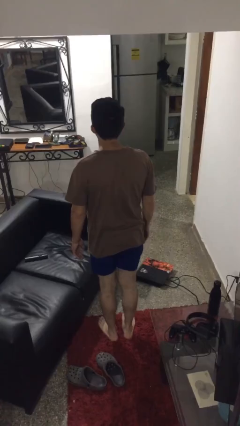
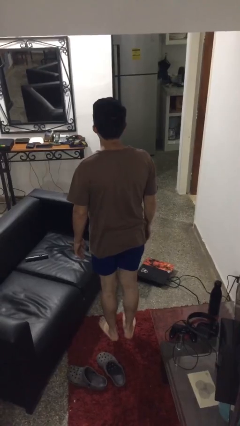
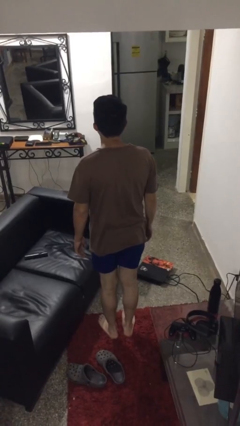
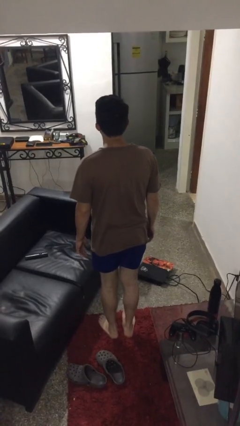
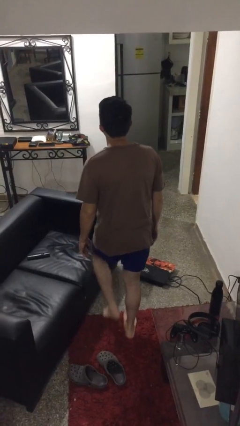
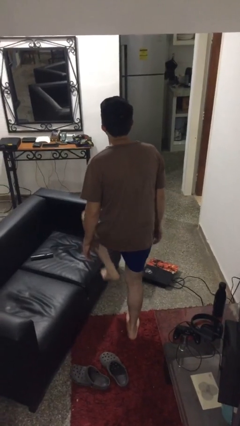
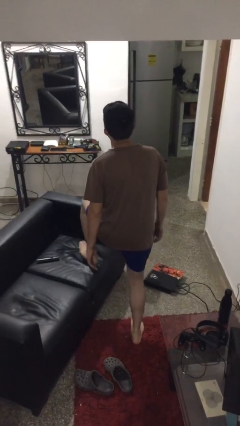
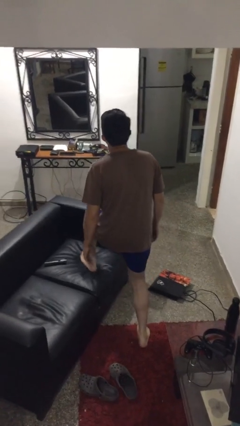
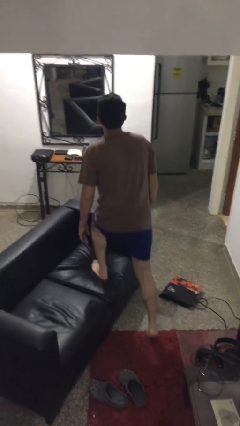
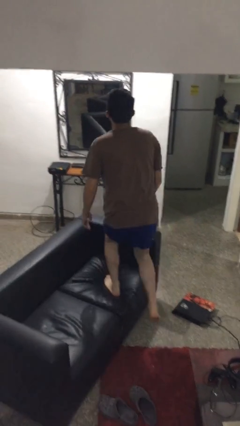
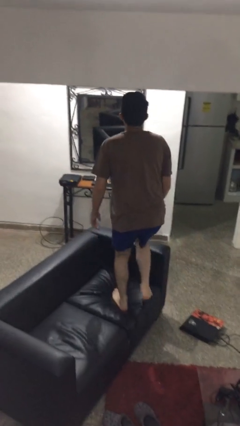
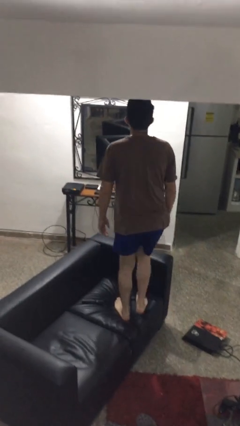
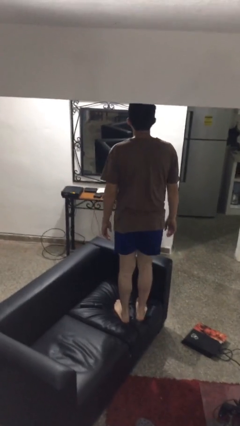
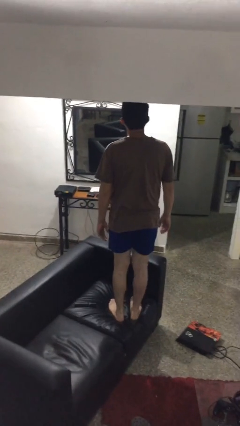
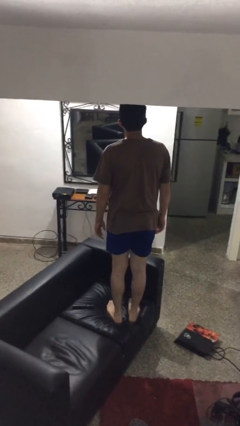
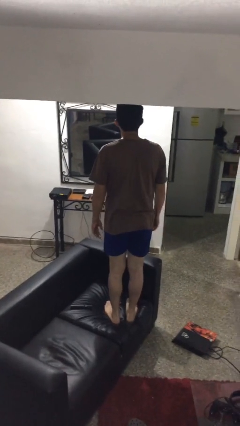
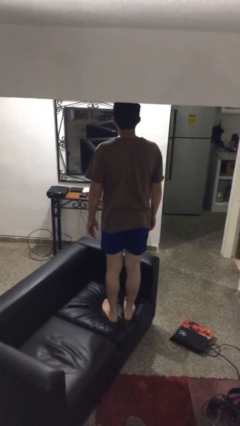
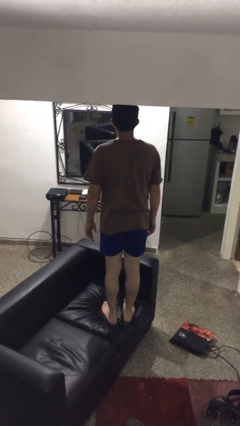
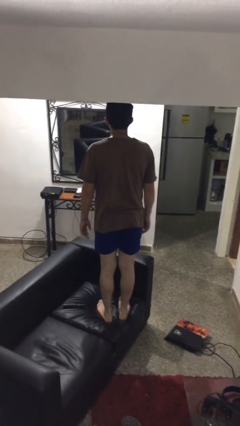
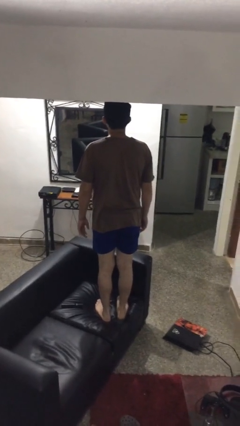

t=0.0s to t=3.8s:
person climbs on couch

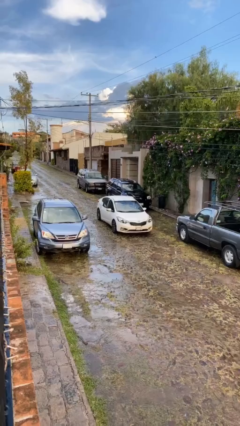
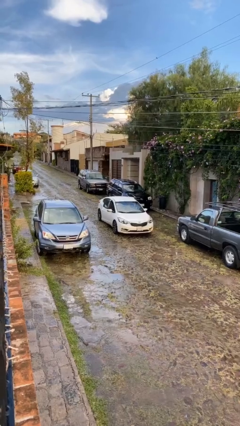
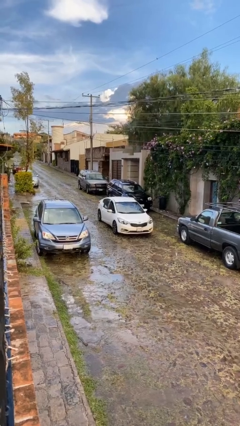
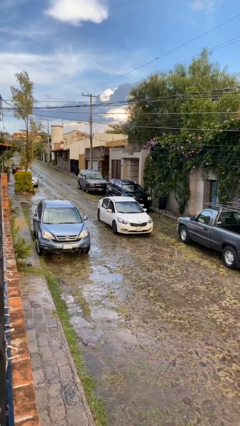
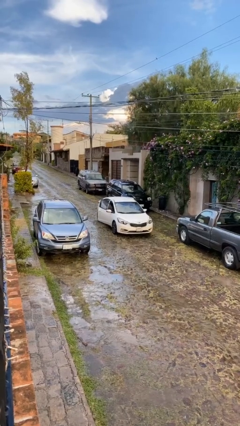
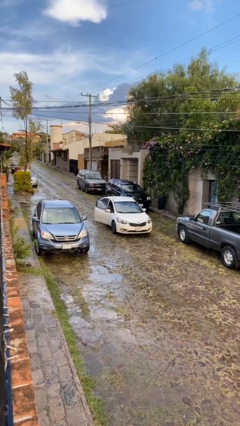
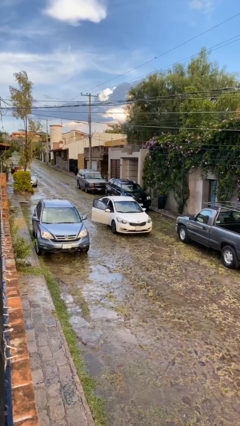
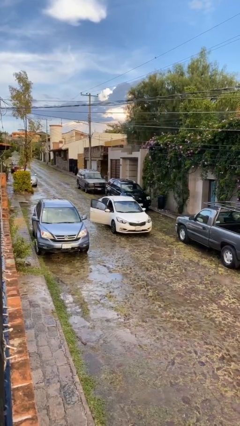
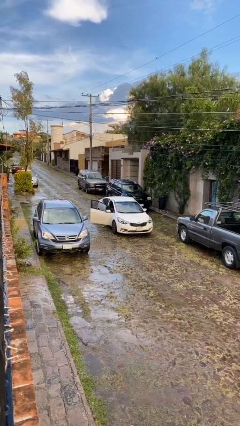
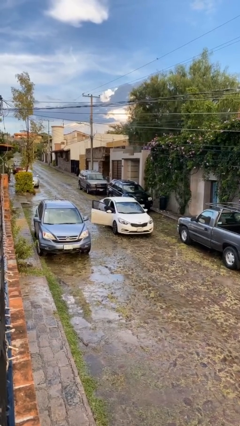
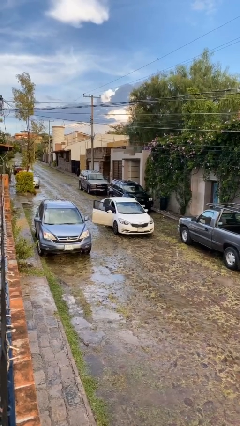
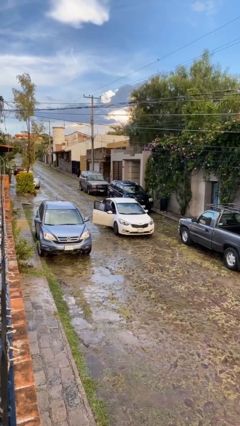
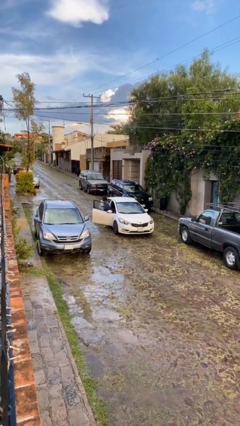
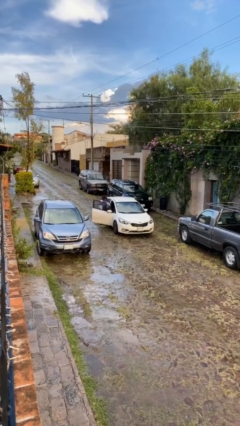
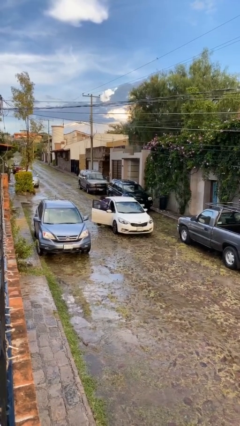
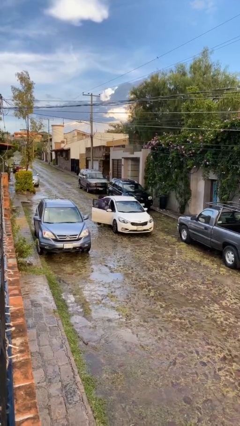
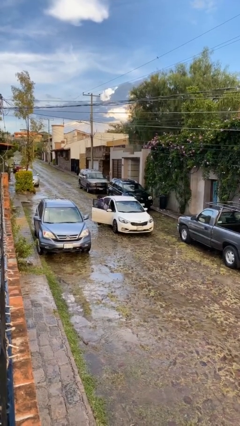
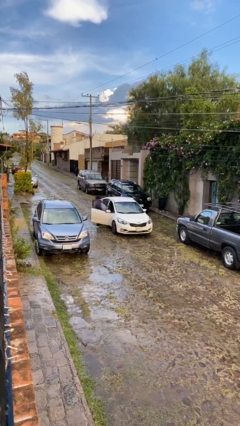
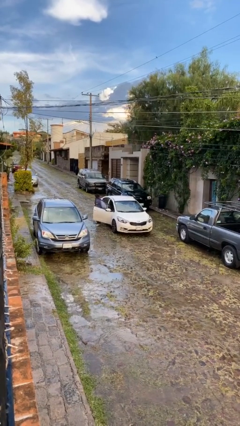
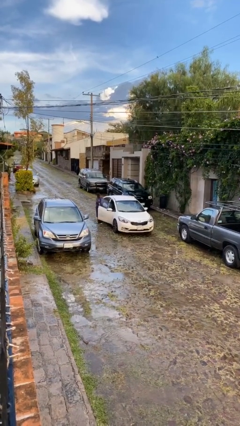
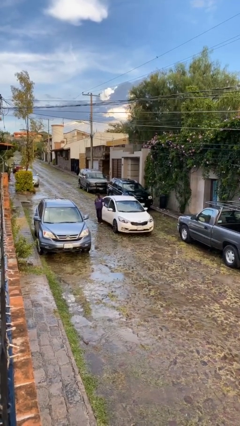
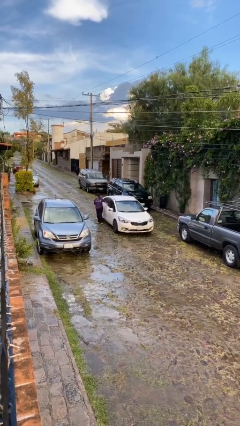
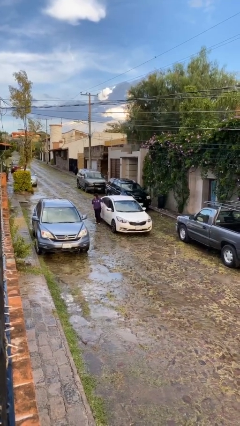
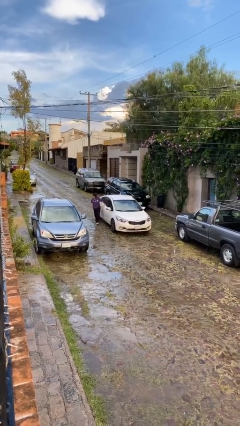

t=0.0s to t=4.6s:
car drops off person

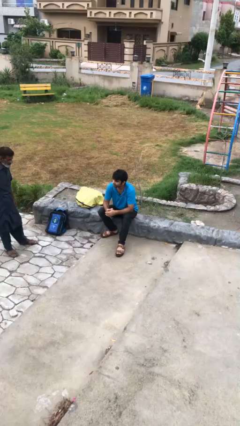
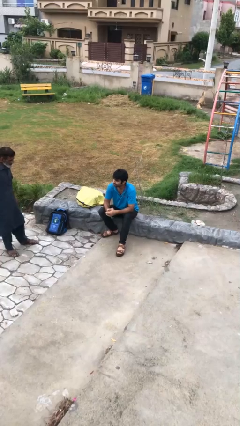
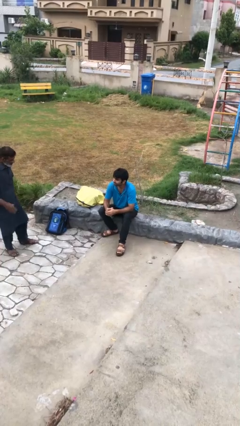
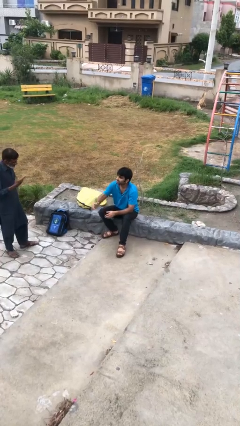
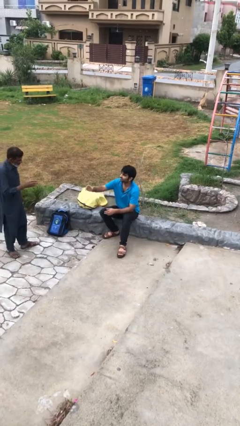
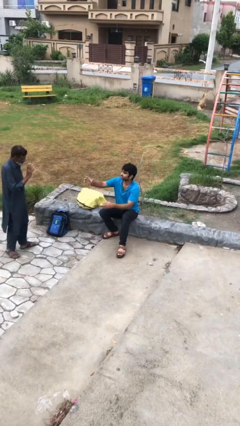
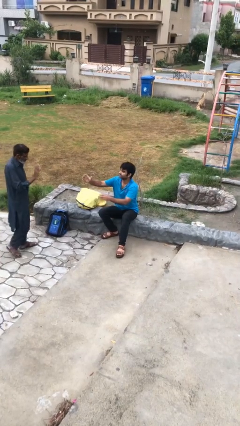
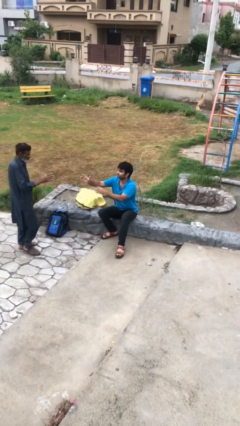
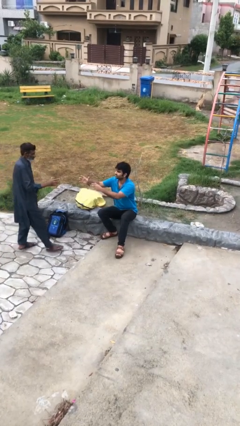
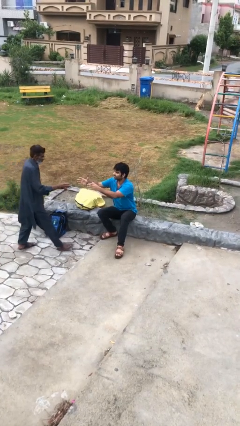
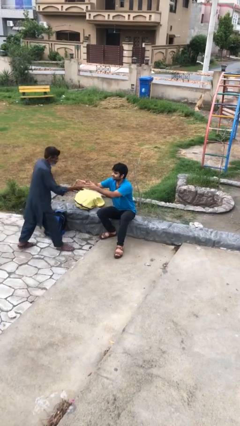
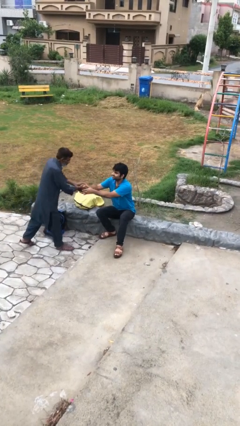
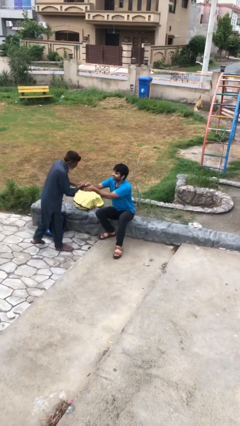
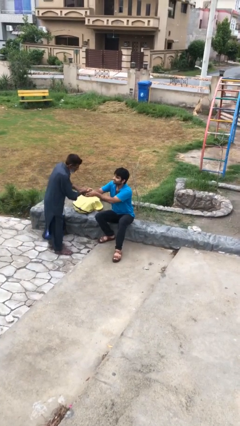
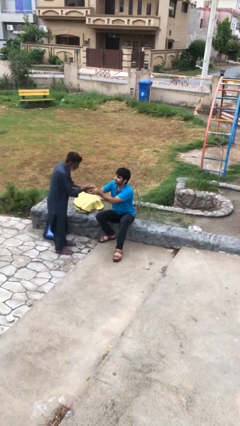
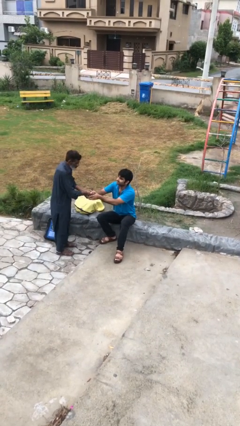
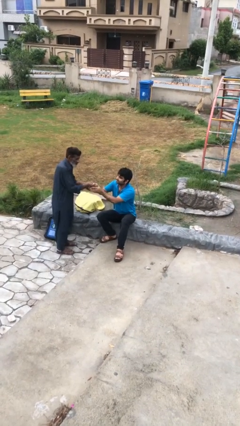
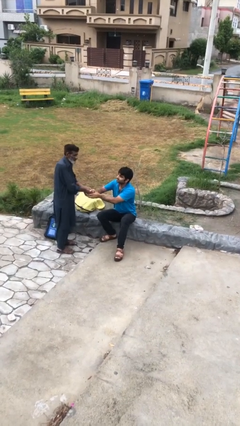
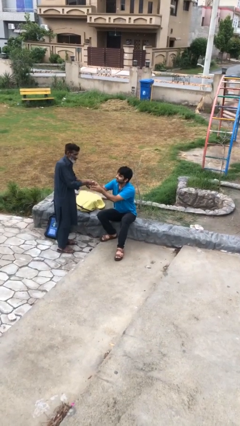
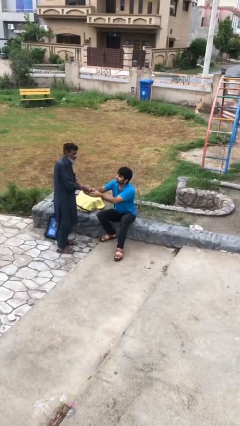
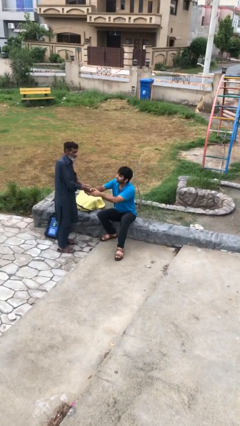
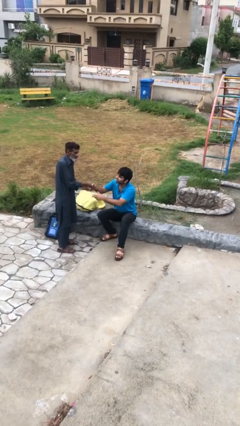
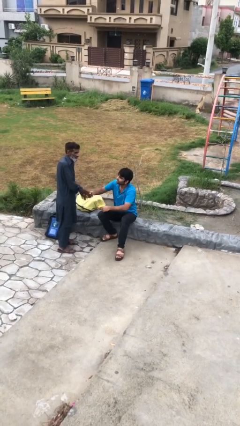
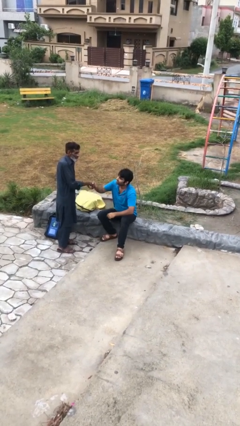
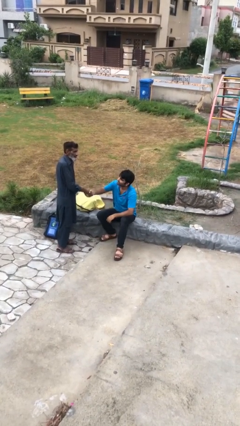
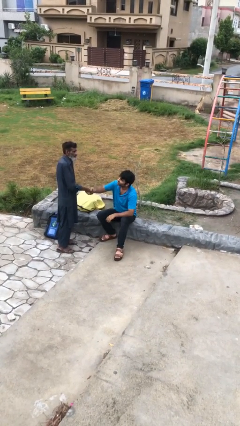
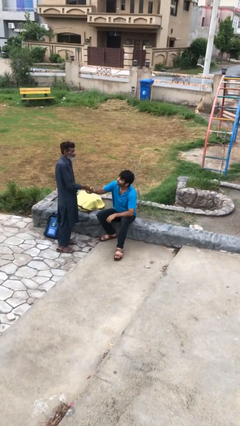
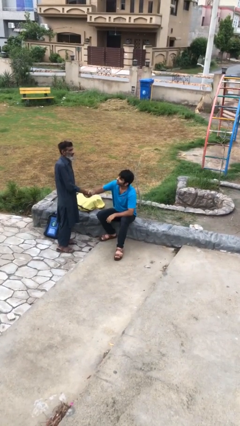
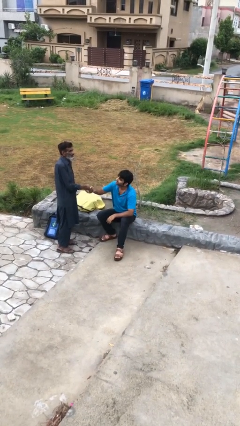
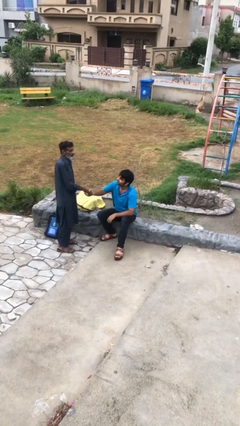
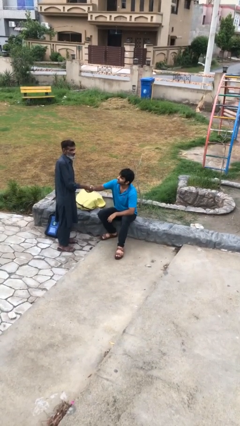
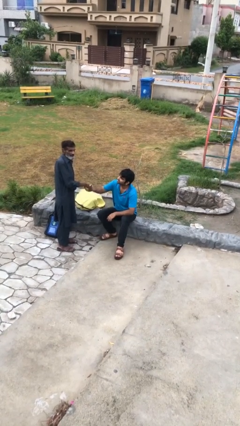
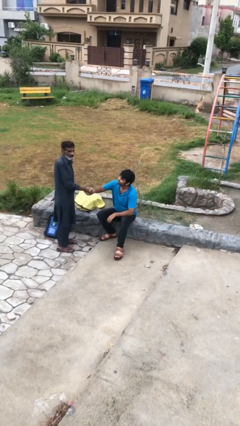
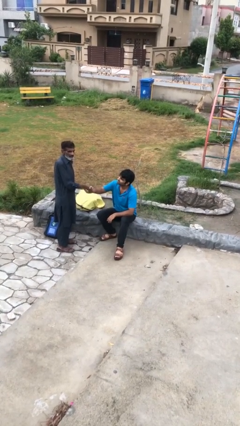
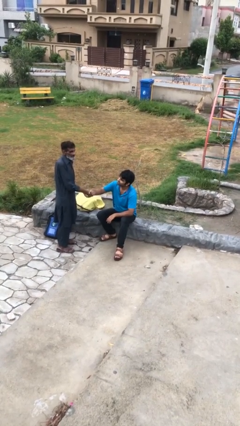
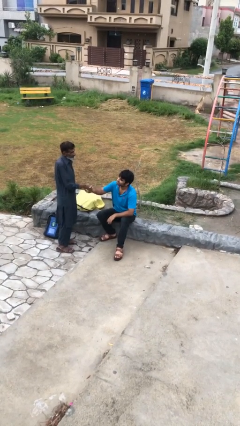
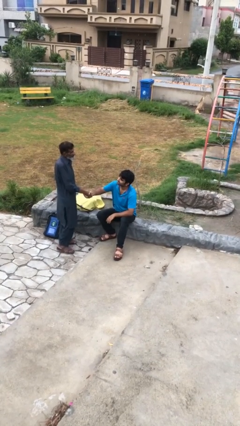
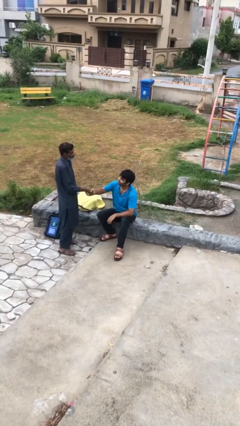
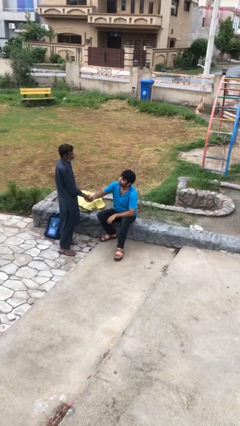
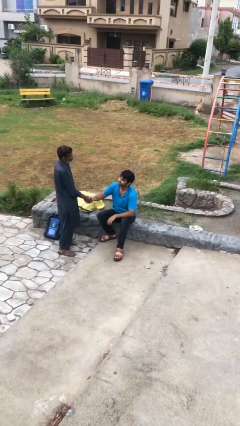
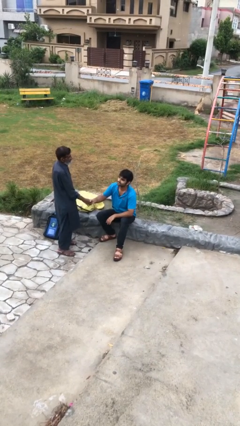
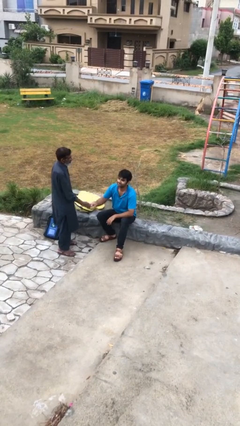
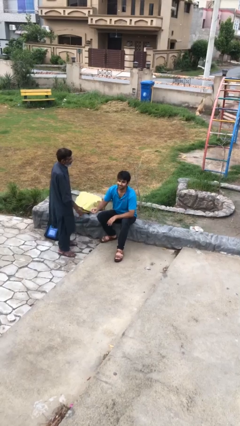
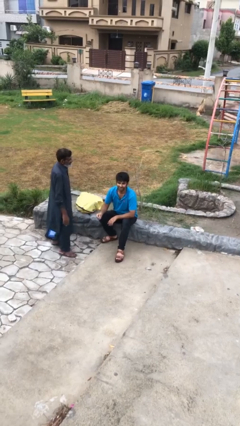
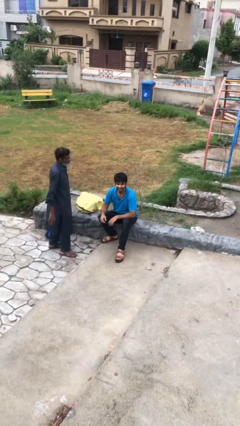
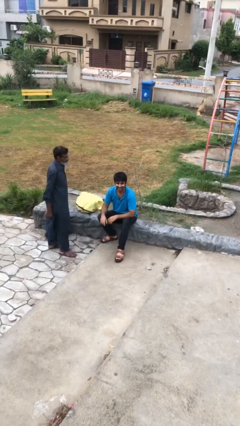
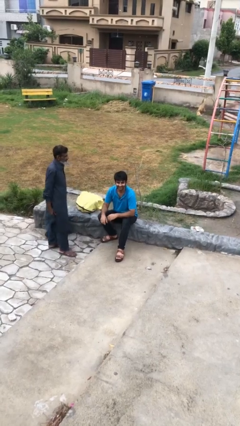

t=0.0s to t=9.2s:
person shakes hand

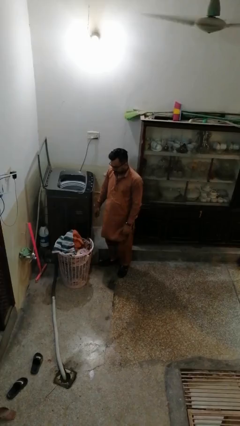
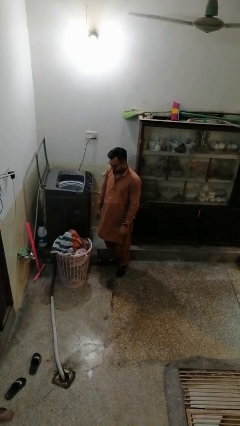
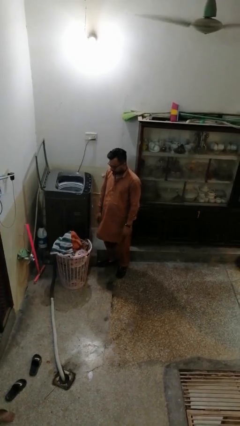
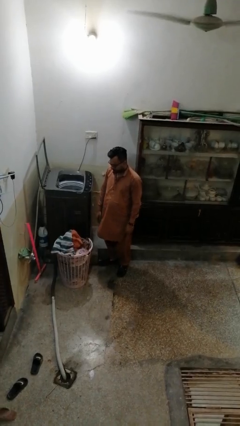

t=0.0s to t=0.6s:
person loads clotheswasher
